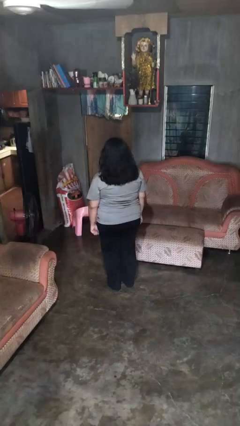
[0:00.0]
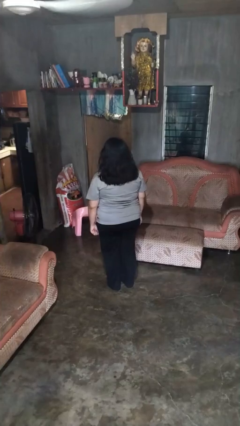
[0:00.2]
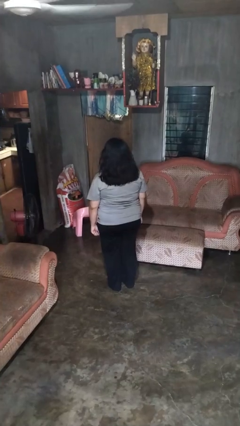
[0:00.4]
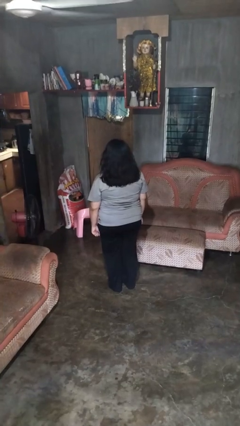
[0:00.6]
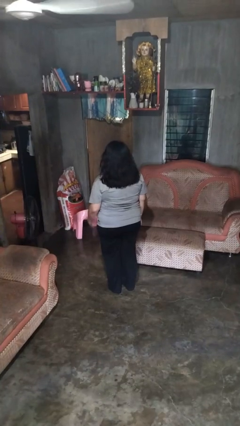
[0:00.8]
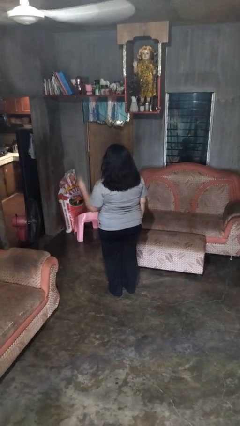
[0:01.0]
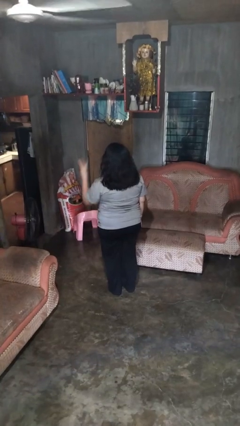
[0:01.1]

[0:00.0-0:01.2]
person gestures number three

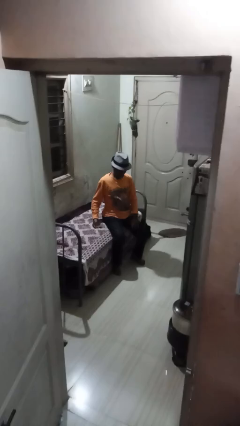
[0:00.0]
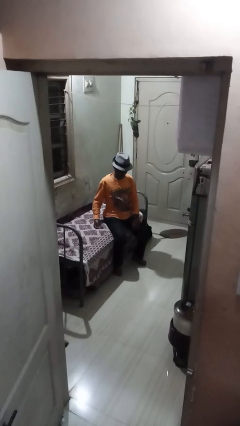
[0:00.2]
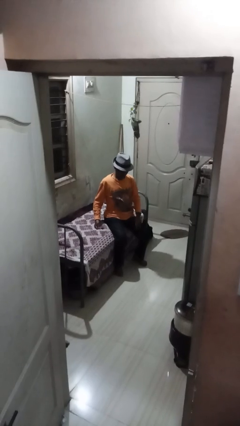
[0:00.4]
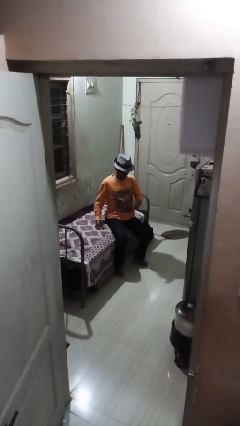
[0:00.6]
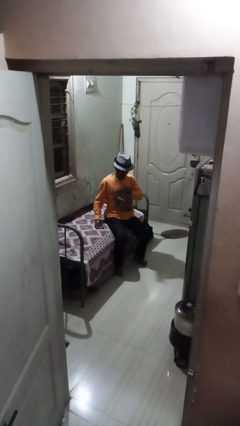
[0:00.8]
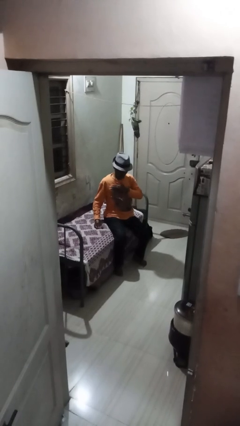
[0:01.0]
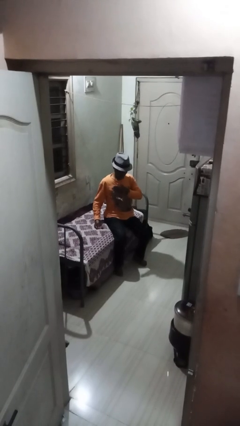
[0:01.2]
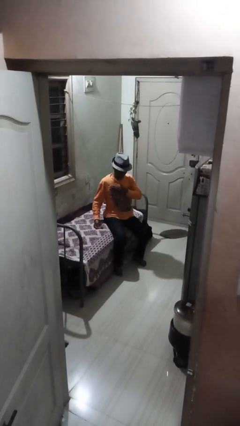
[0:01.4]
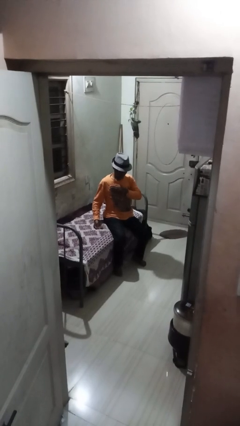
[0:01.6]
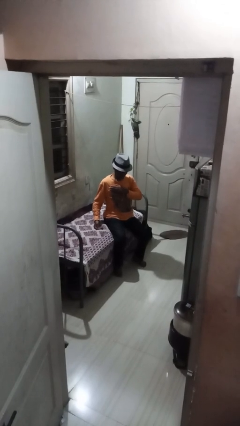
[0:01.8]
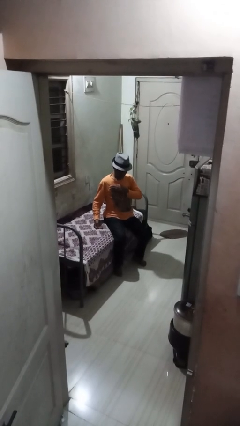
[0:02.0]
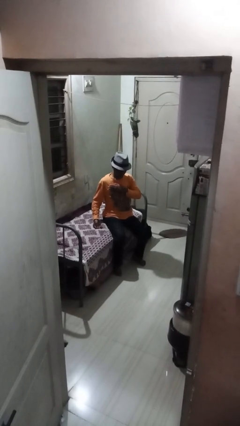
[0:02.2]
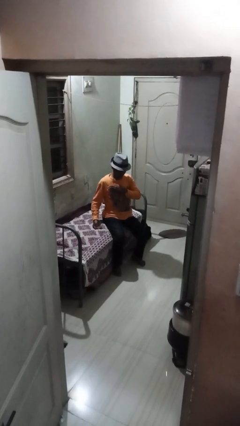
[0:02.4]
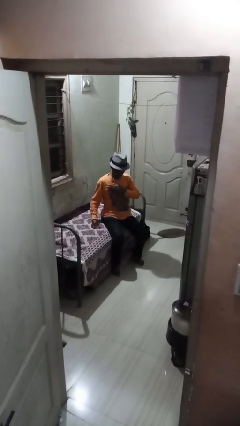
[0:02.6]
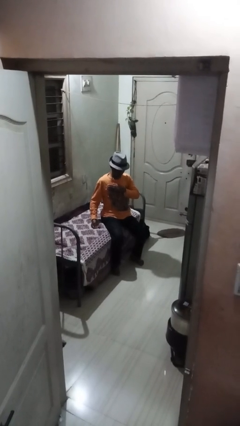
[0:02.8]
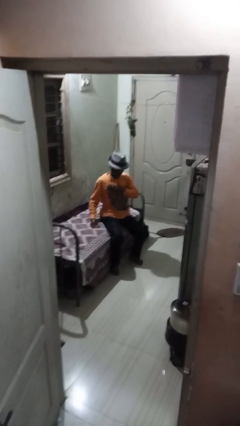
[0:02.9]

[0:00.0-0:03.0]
person drums on chest

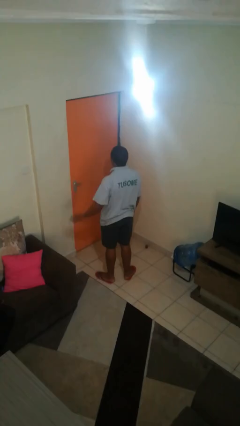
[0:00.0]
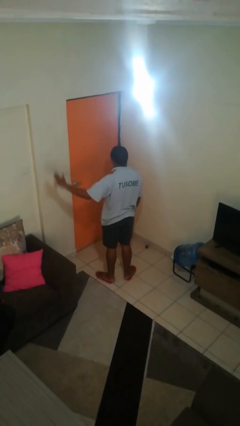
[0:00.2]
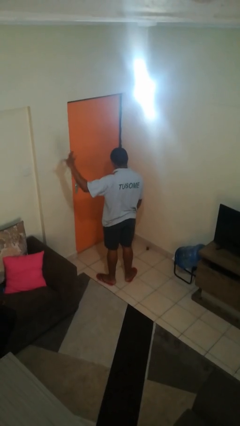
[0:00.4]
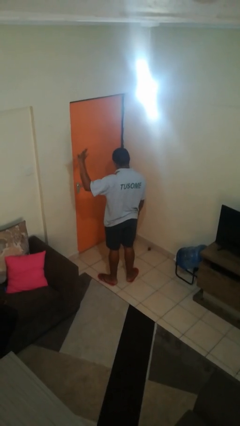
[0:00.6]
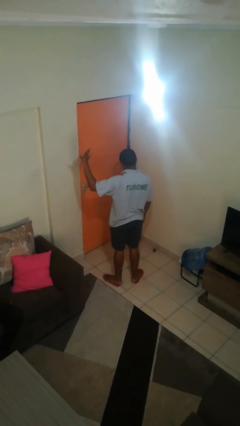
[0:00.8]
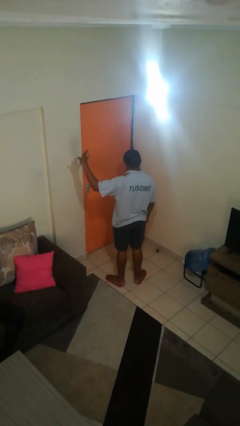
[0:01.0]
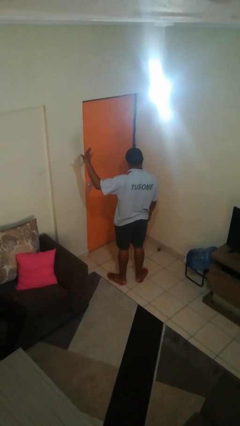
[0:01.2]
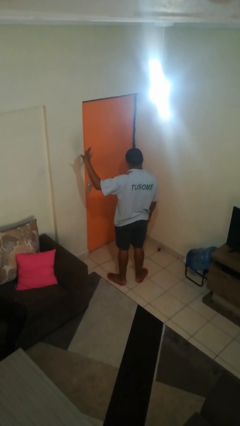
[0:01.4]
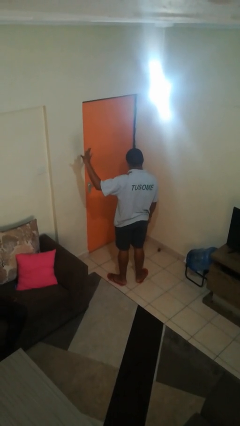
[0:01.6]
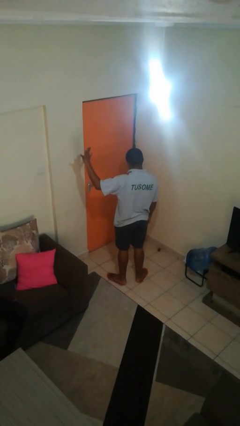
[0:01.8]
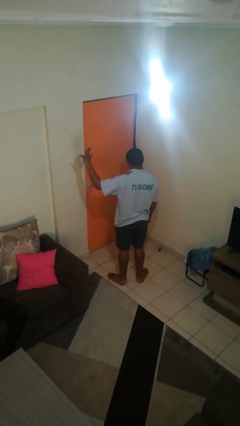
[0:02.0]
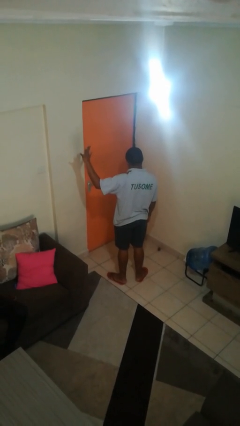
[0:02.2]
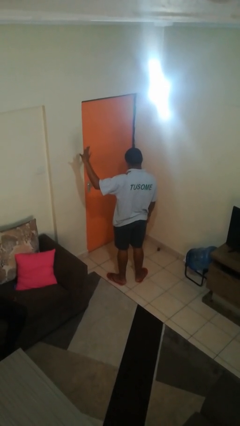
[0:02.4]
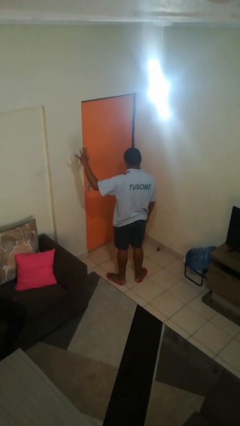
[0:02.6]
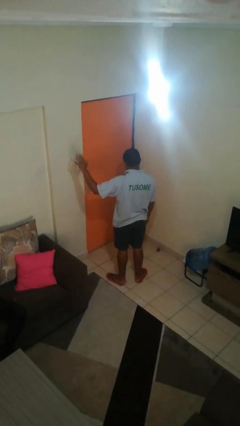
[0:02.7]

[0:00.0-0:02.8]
person gestures number five

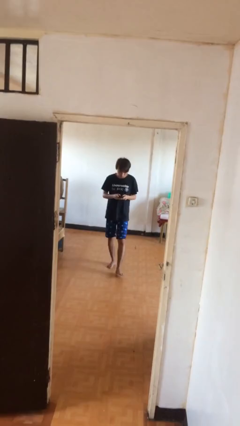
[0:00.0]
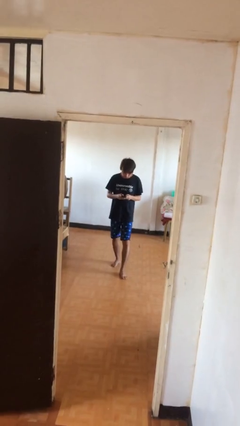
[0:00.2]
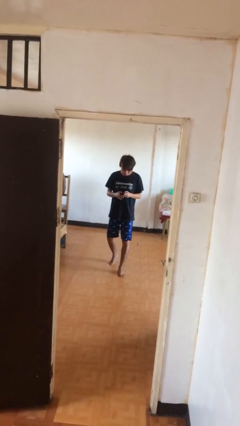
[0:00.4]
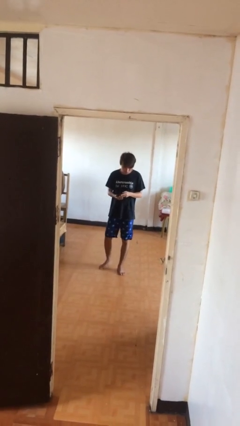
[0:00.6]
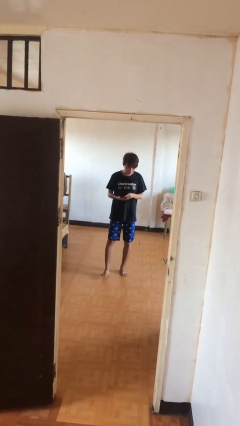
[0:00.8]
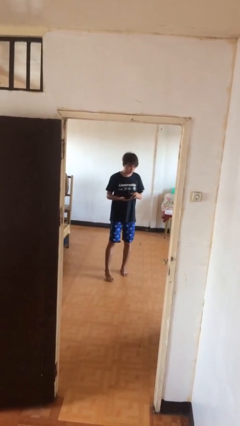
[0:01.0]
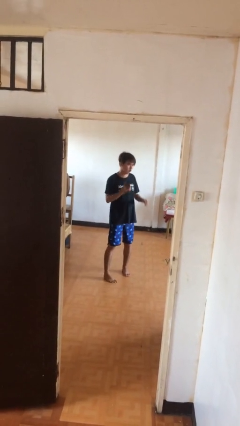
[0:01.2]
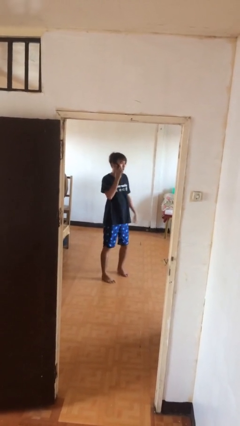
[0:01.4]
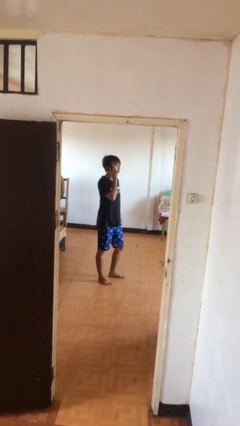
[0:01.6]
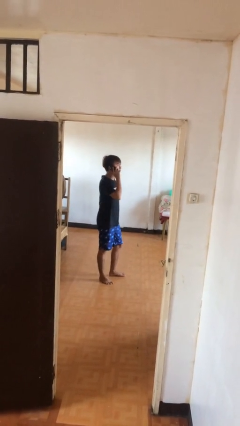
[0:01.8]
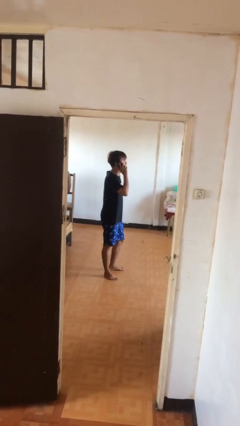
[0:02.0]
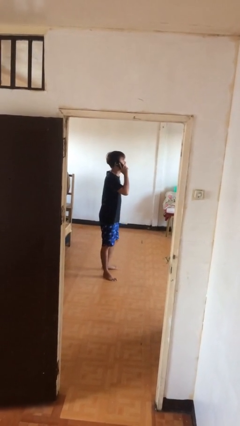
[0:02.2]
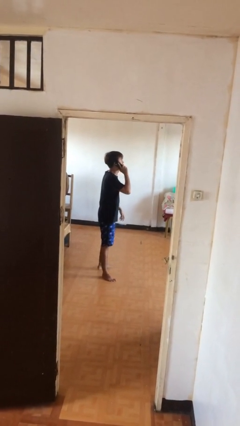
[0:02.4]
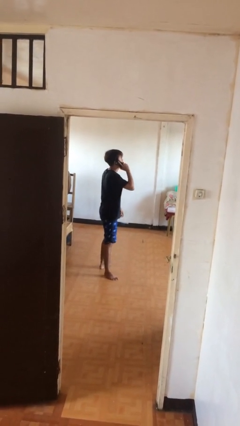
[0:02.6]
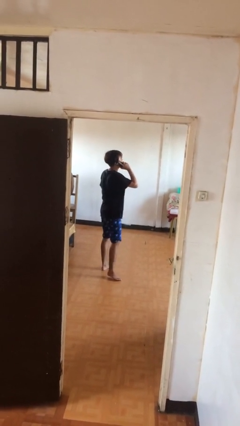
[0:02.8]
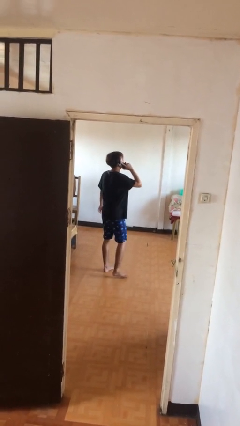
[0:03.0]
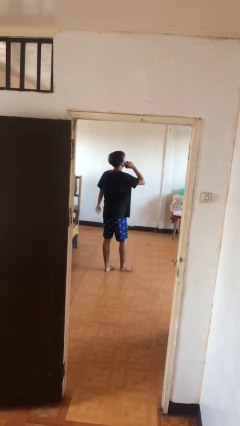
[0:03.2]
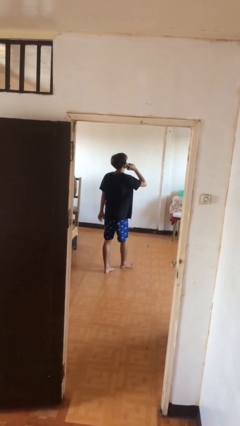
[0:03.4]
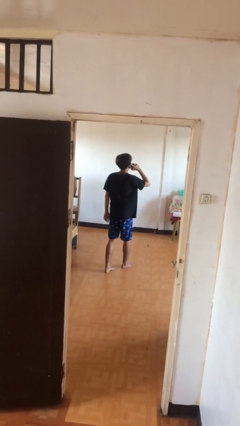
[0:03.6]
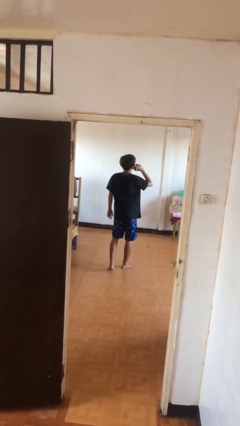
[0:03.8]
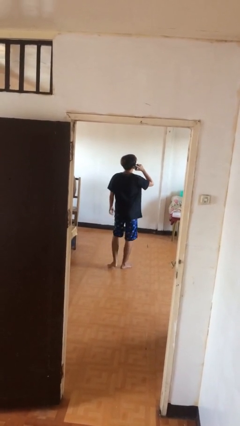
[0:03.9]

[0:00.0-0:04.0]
person talks on phone

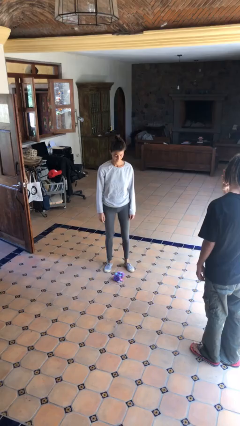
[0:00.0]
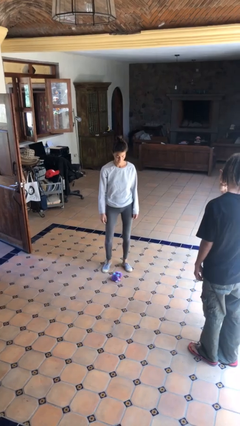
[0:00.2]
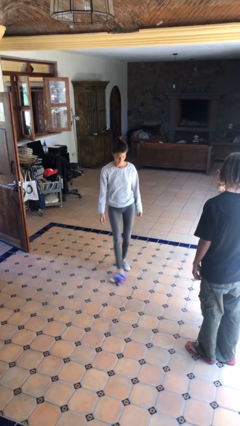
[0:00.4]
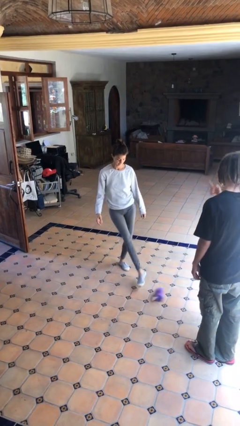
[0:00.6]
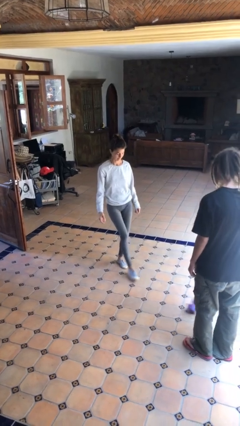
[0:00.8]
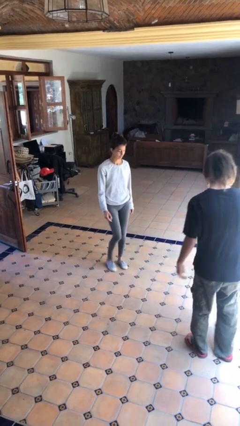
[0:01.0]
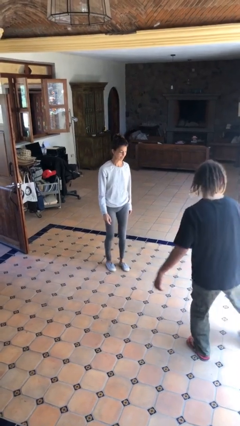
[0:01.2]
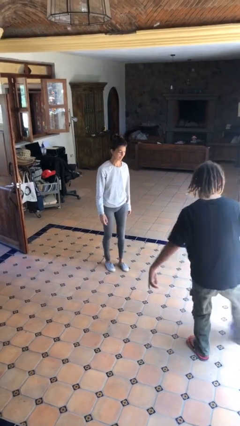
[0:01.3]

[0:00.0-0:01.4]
person kicks object to person

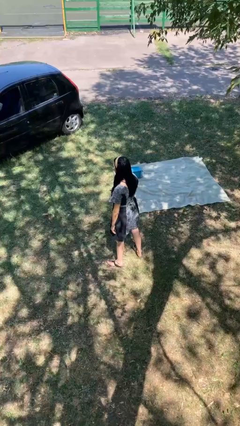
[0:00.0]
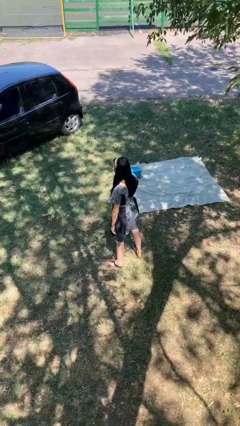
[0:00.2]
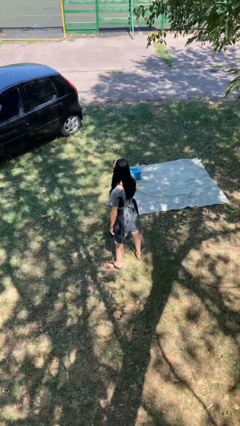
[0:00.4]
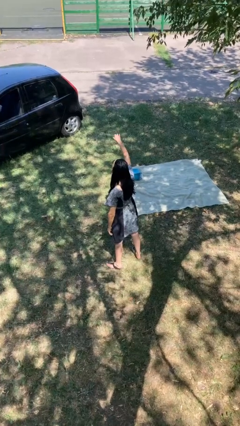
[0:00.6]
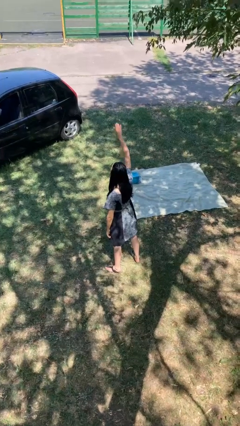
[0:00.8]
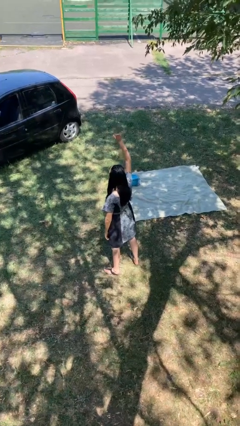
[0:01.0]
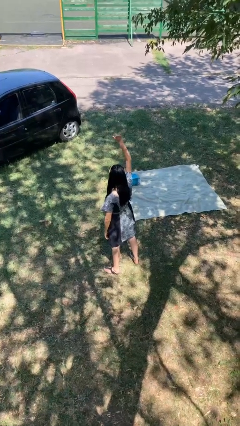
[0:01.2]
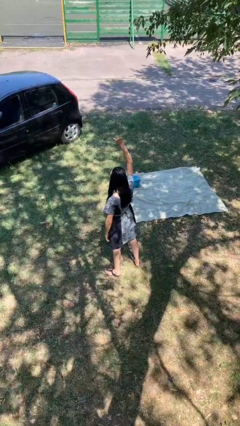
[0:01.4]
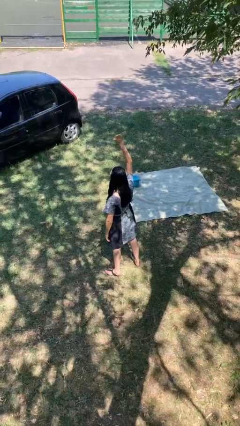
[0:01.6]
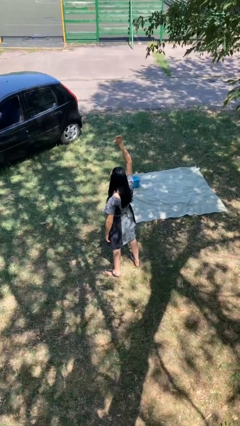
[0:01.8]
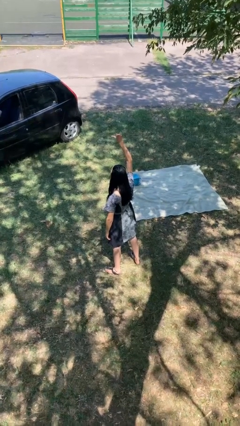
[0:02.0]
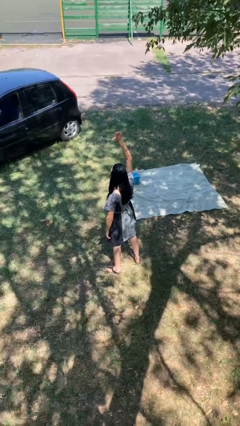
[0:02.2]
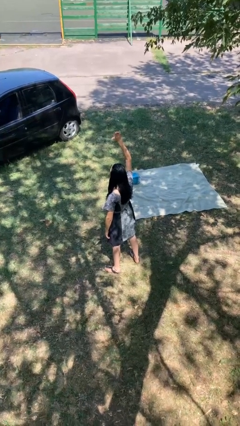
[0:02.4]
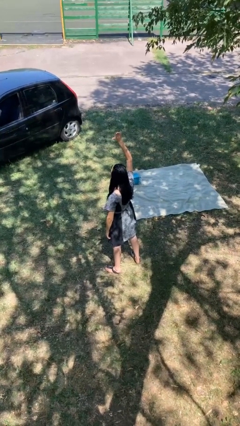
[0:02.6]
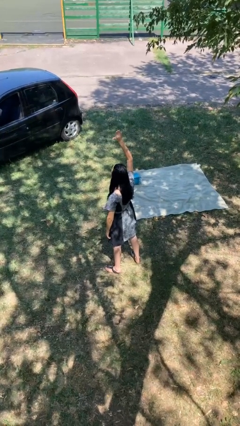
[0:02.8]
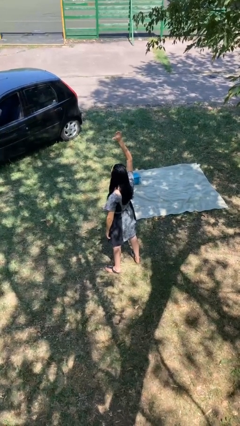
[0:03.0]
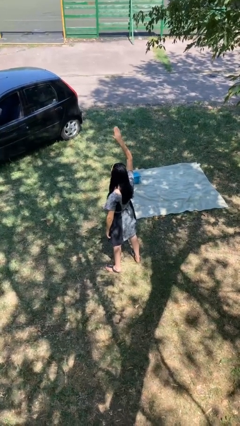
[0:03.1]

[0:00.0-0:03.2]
person gestures raise hand

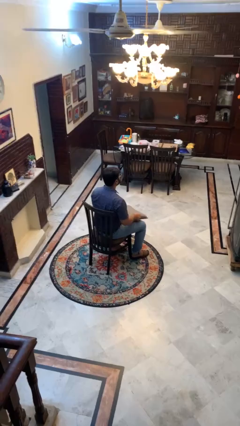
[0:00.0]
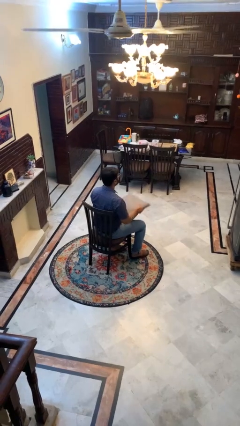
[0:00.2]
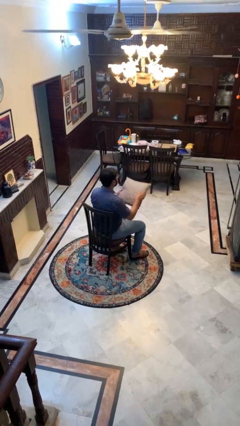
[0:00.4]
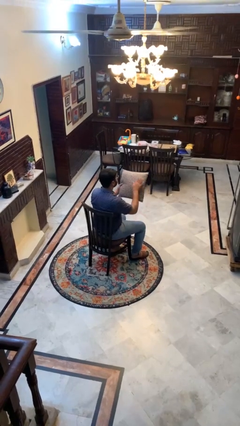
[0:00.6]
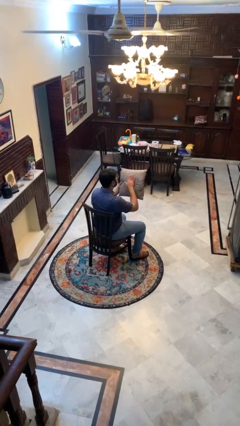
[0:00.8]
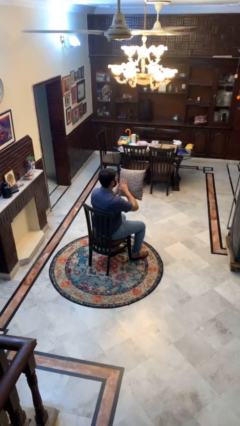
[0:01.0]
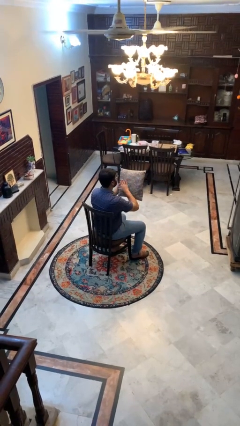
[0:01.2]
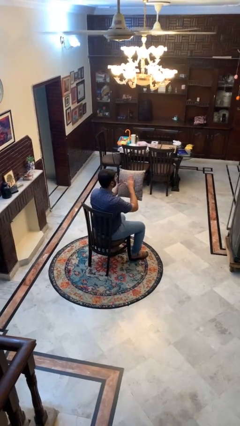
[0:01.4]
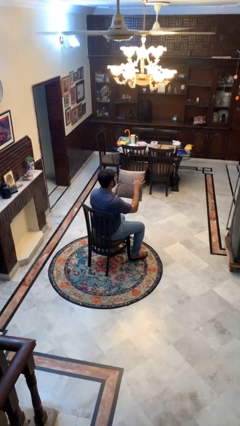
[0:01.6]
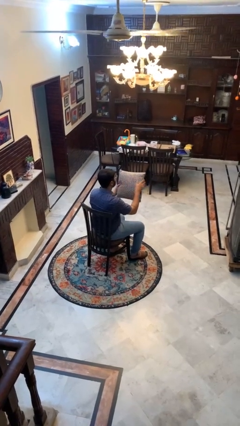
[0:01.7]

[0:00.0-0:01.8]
person waves hand over object
